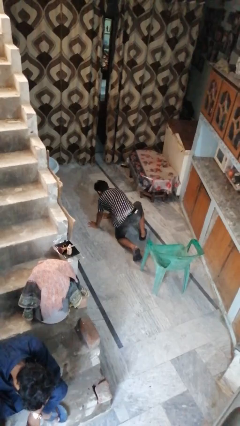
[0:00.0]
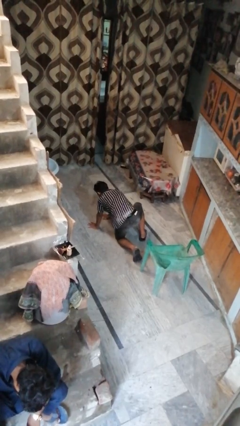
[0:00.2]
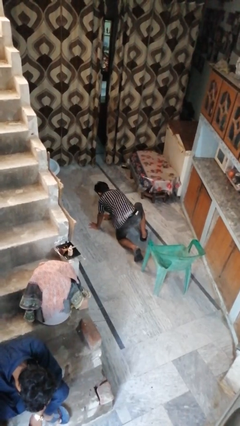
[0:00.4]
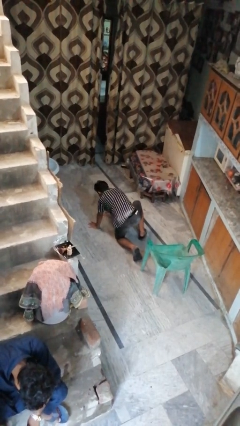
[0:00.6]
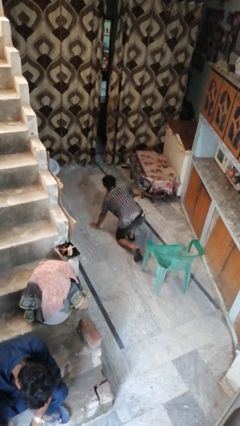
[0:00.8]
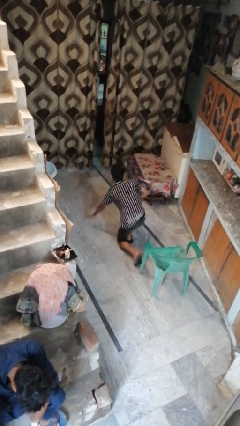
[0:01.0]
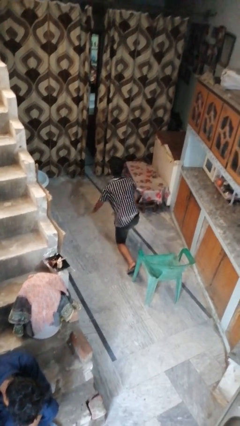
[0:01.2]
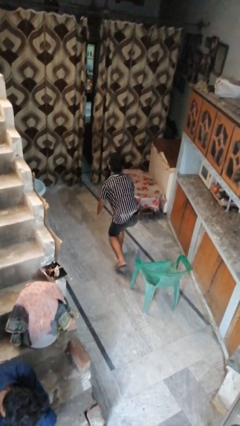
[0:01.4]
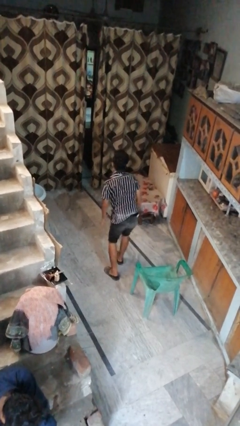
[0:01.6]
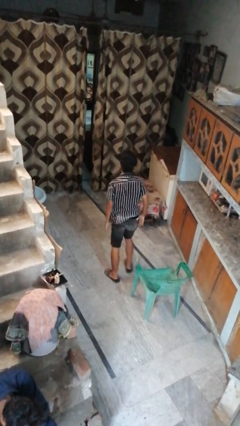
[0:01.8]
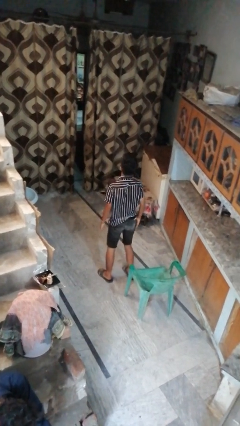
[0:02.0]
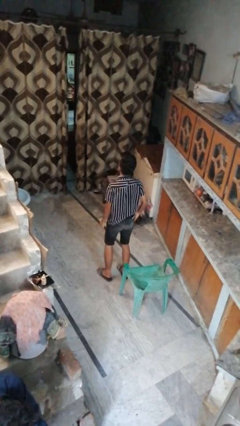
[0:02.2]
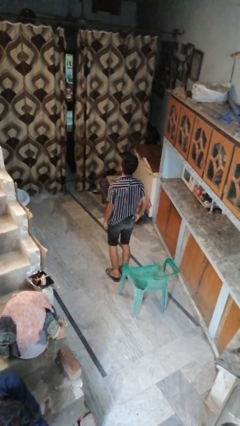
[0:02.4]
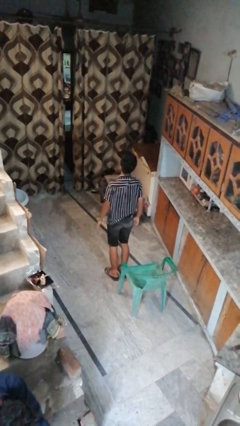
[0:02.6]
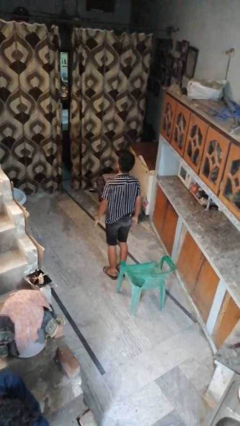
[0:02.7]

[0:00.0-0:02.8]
person stands up from floor

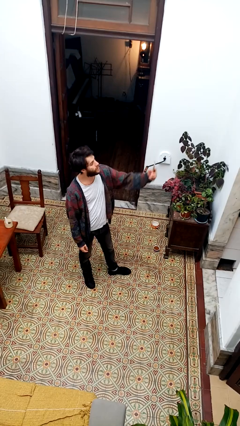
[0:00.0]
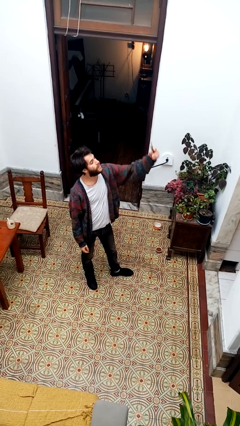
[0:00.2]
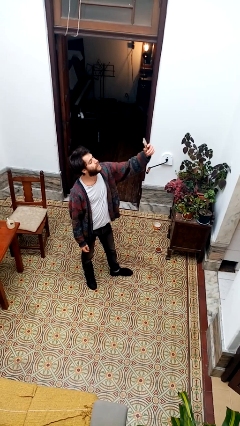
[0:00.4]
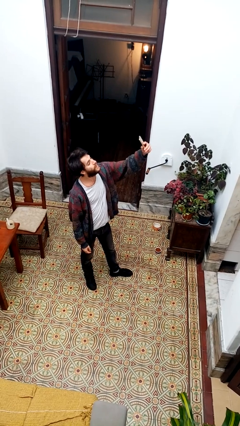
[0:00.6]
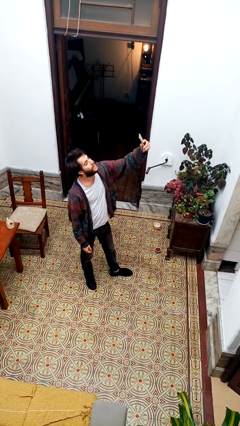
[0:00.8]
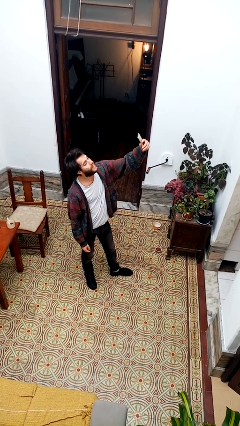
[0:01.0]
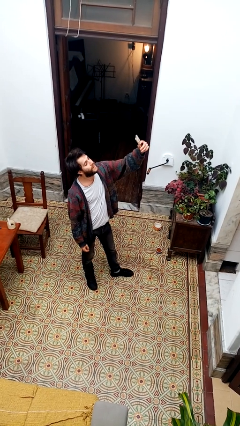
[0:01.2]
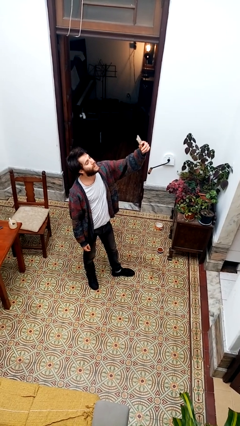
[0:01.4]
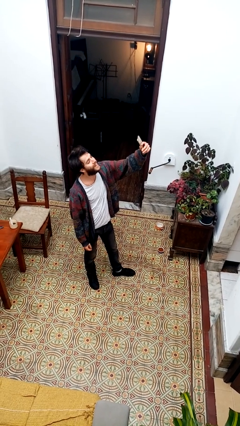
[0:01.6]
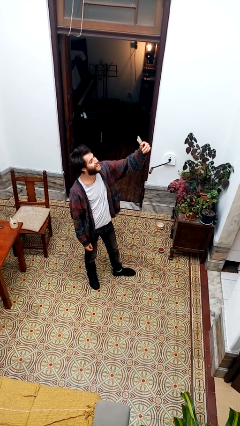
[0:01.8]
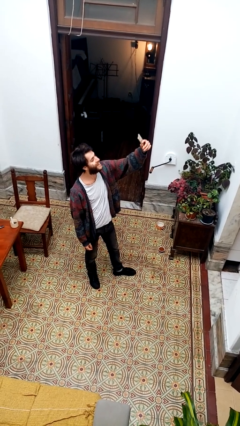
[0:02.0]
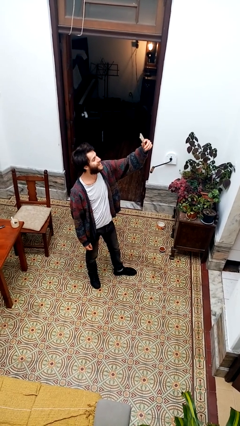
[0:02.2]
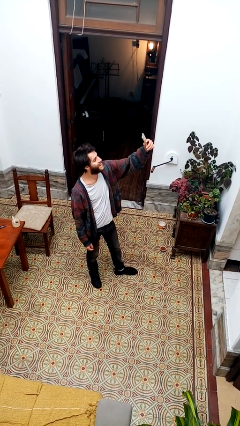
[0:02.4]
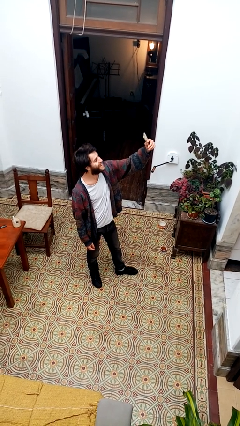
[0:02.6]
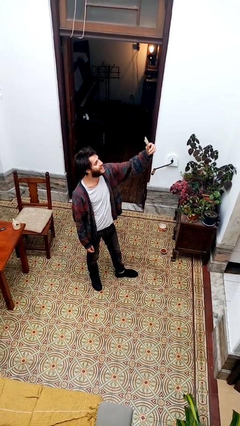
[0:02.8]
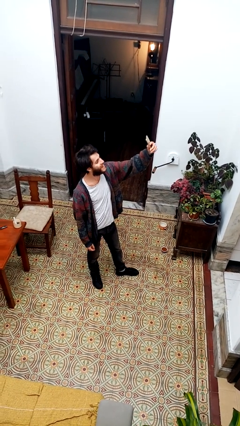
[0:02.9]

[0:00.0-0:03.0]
person takes selfie

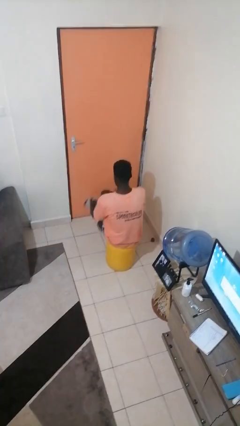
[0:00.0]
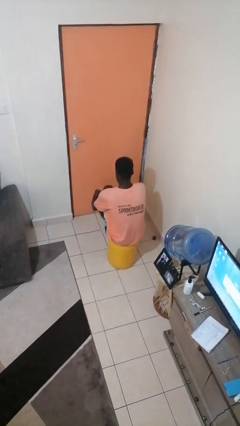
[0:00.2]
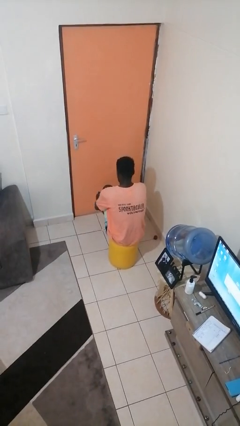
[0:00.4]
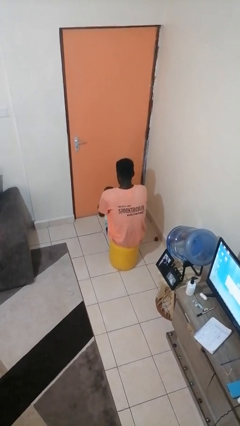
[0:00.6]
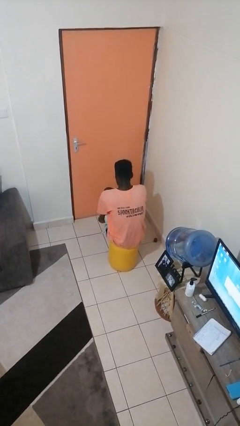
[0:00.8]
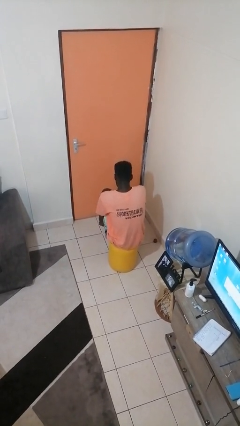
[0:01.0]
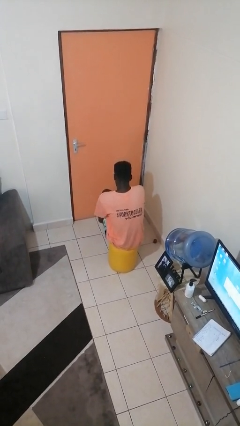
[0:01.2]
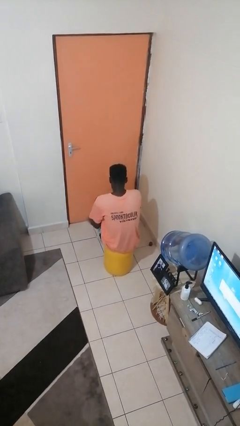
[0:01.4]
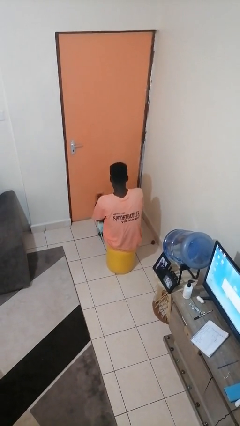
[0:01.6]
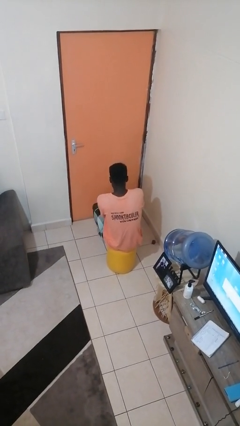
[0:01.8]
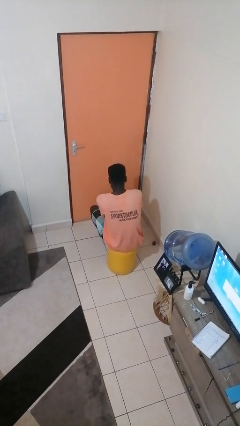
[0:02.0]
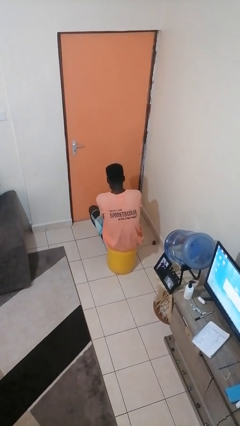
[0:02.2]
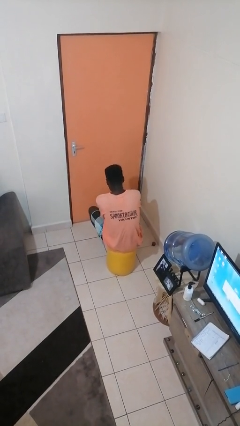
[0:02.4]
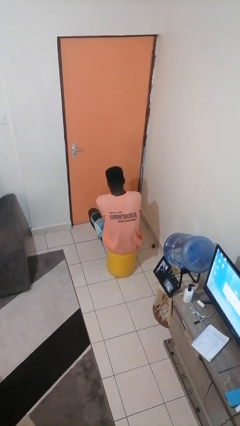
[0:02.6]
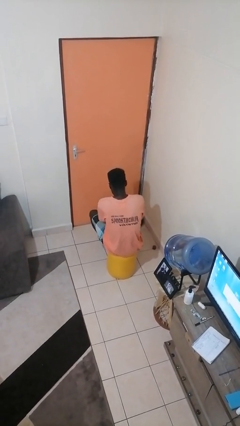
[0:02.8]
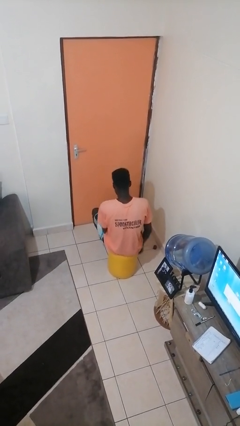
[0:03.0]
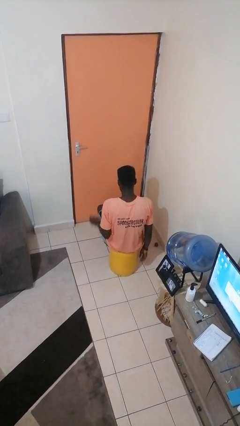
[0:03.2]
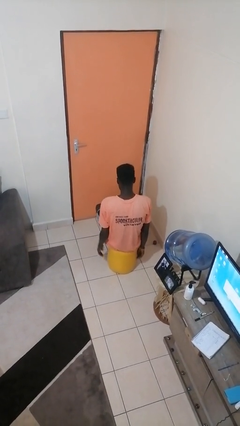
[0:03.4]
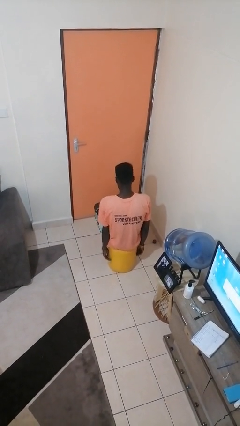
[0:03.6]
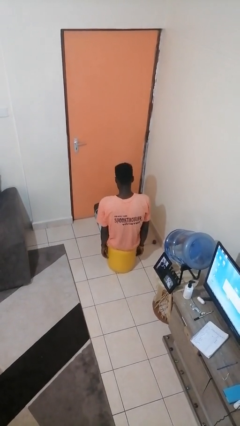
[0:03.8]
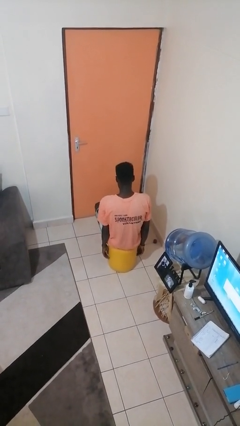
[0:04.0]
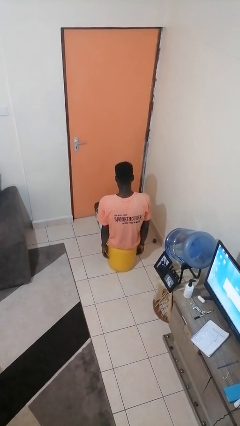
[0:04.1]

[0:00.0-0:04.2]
person puts on socks

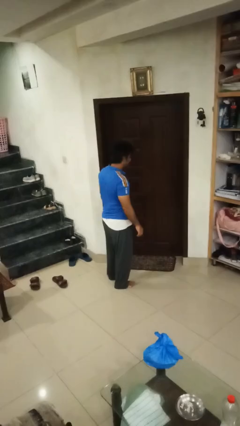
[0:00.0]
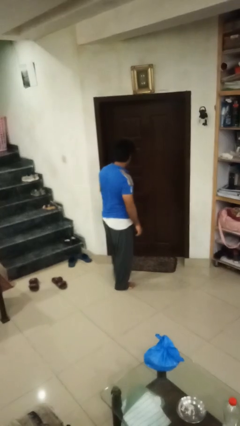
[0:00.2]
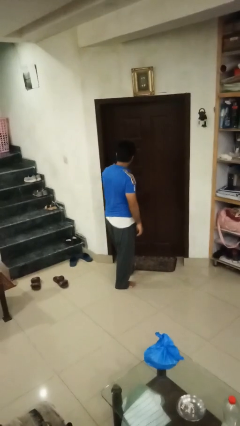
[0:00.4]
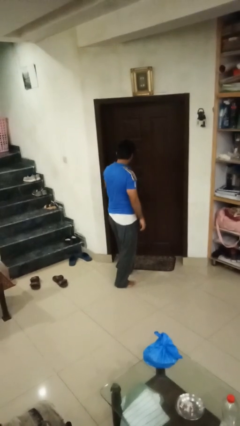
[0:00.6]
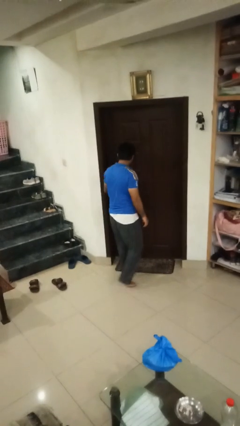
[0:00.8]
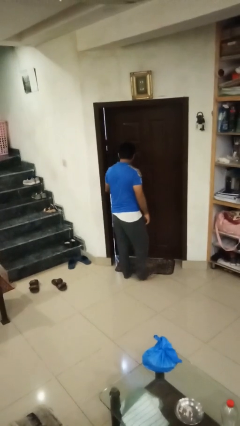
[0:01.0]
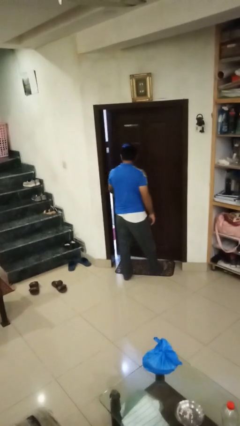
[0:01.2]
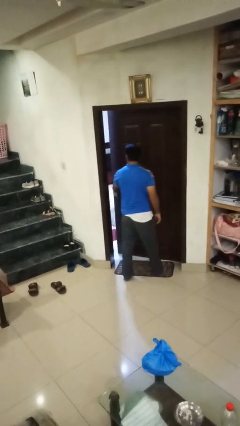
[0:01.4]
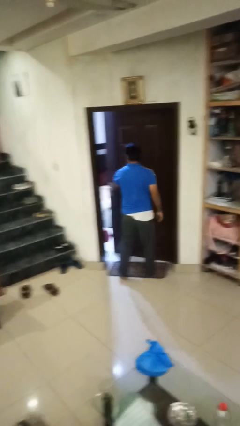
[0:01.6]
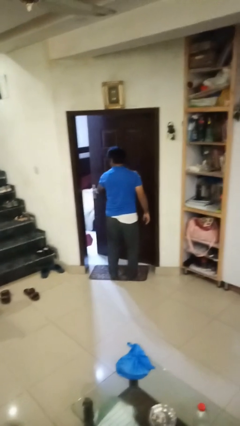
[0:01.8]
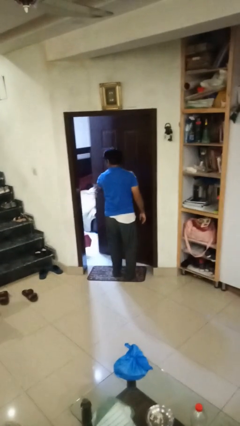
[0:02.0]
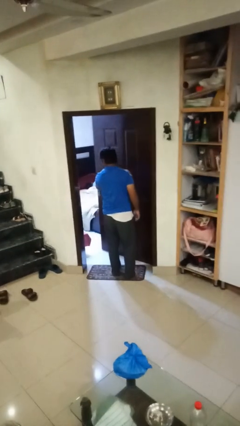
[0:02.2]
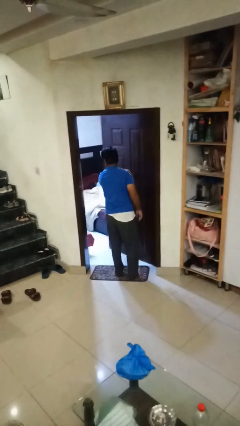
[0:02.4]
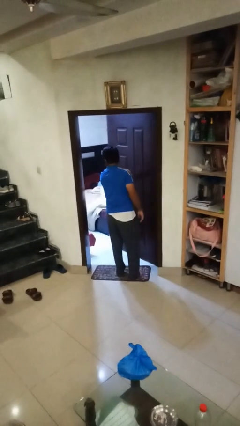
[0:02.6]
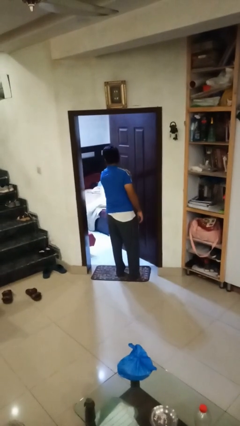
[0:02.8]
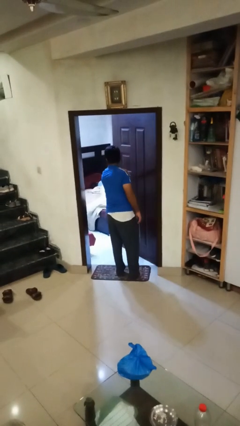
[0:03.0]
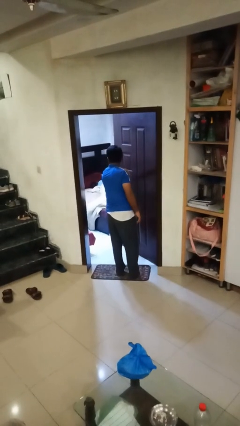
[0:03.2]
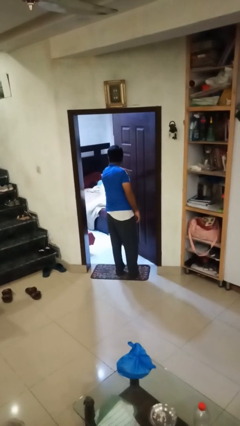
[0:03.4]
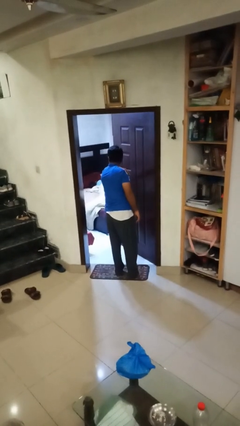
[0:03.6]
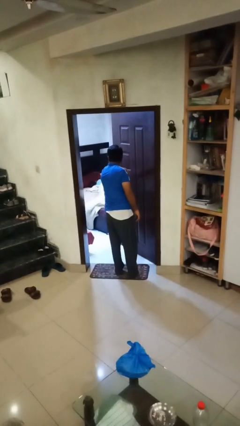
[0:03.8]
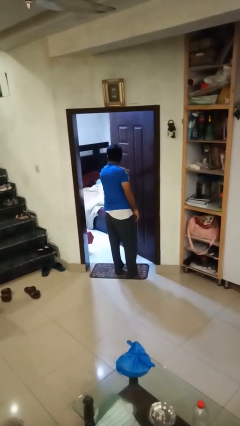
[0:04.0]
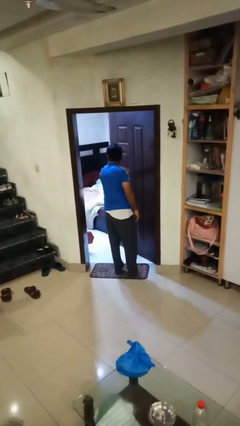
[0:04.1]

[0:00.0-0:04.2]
person opens facility door

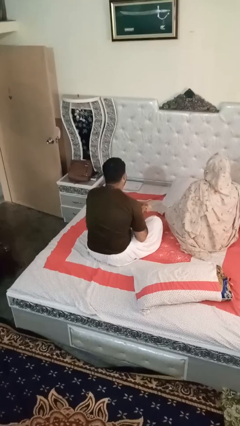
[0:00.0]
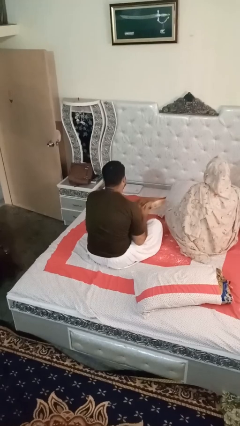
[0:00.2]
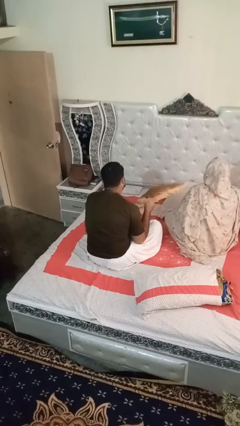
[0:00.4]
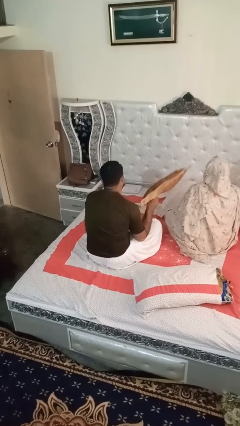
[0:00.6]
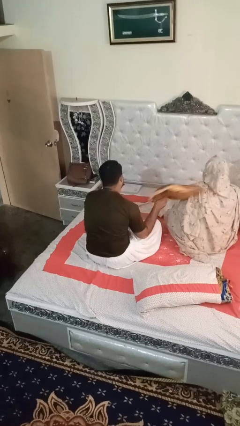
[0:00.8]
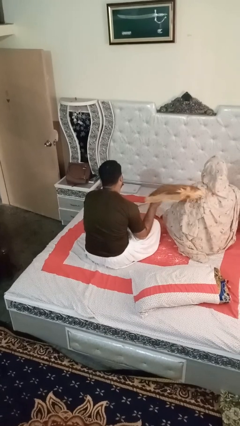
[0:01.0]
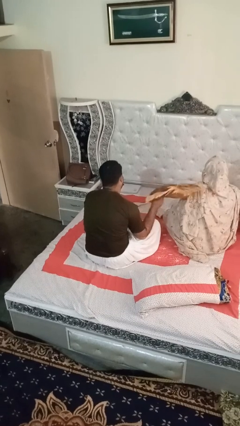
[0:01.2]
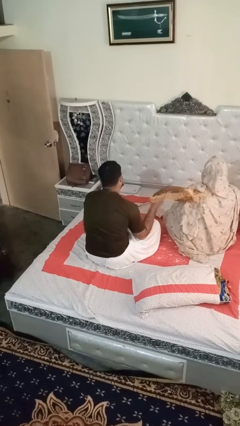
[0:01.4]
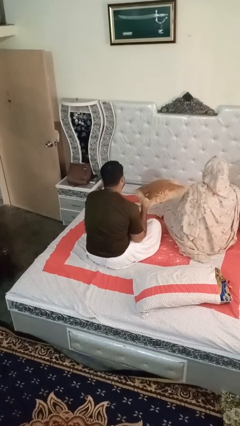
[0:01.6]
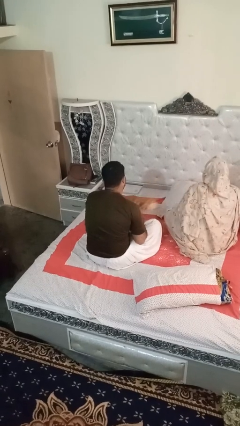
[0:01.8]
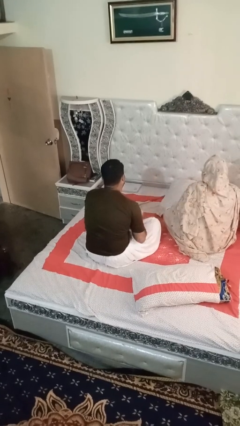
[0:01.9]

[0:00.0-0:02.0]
person hits person with pillow

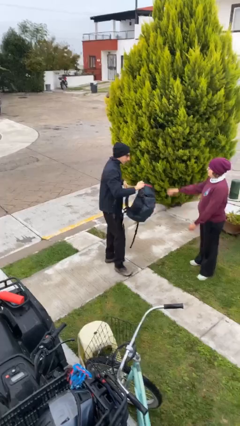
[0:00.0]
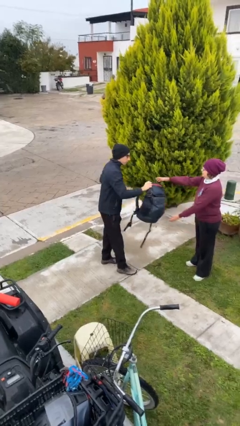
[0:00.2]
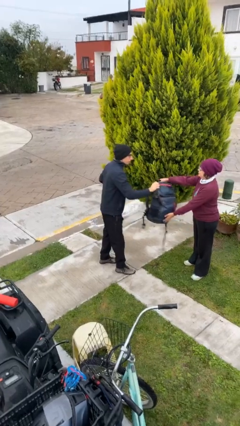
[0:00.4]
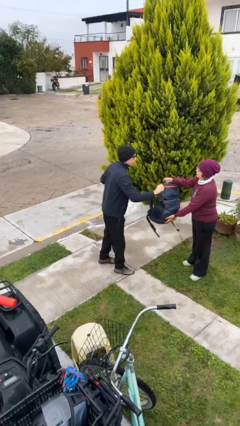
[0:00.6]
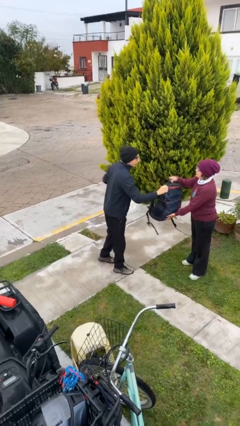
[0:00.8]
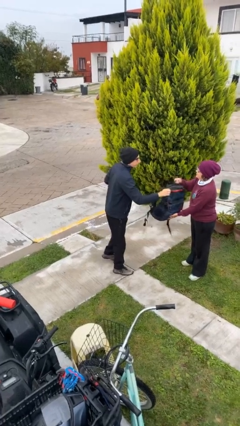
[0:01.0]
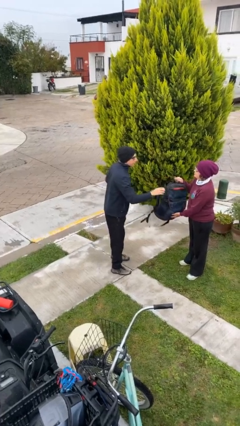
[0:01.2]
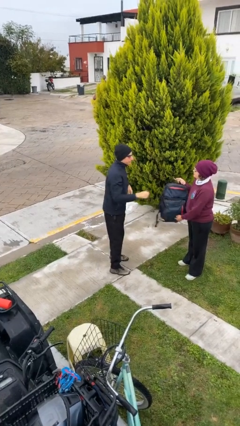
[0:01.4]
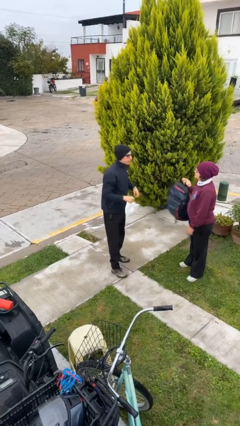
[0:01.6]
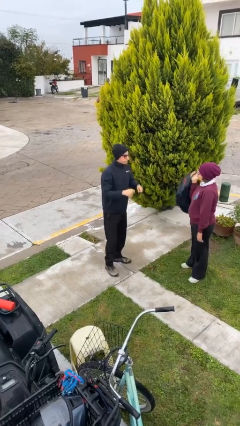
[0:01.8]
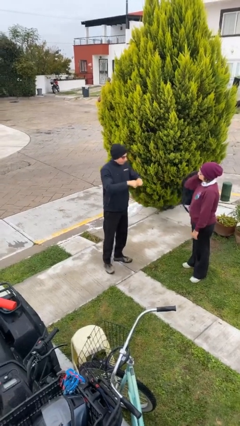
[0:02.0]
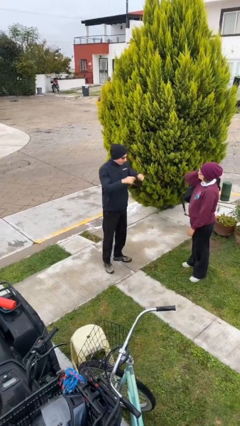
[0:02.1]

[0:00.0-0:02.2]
person transfers object to person
